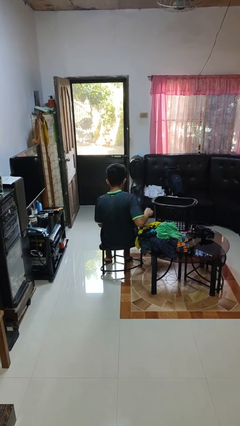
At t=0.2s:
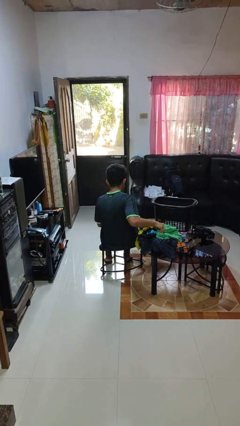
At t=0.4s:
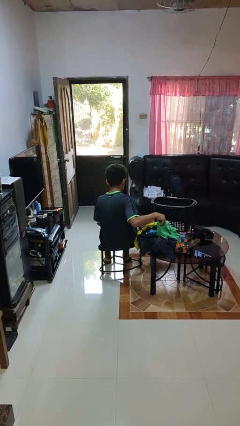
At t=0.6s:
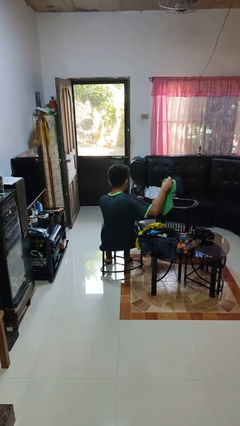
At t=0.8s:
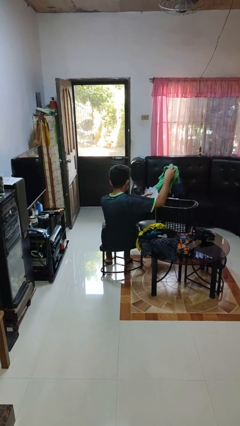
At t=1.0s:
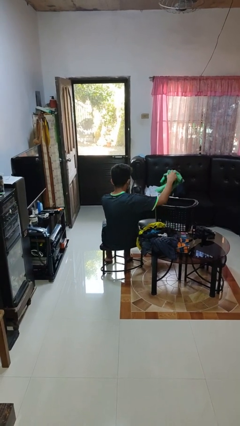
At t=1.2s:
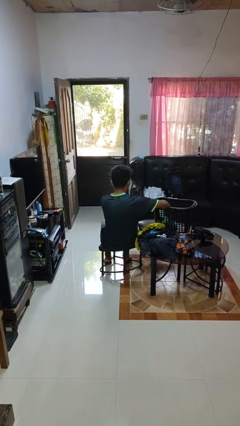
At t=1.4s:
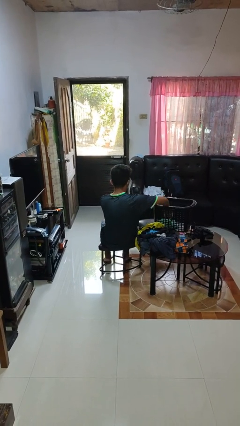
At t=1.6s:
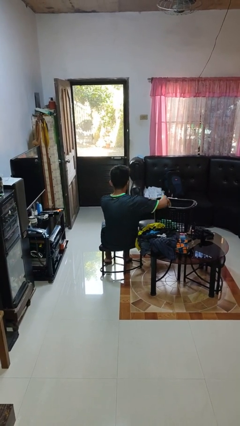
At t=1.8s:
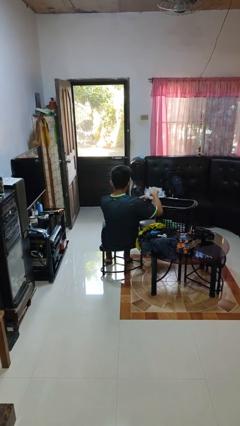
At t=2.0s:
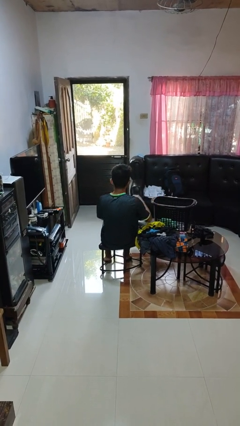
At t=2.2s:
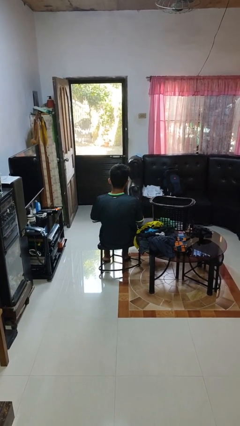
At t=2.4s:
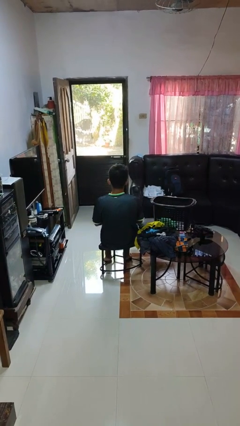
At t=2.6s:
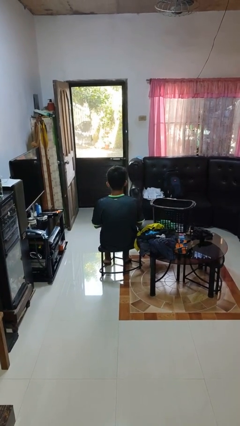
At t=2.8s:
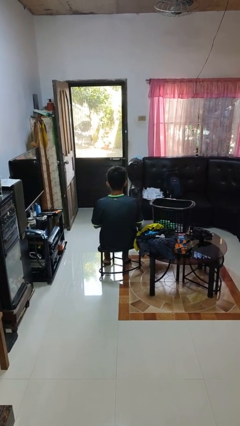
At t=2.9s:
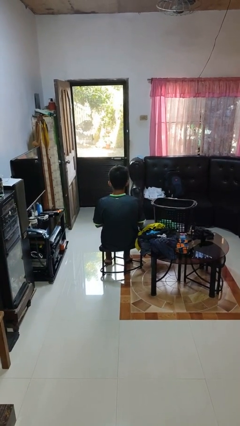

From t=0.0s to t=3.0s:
person puts object into basket

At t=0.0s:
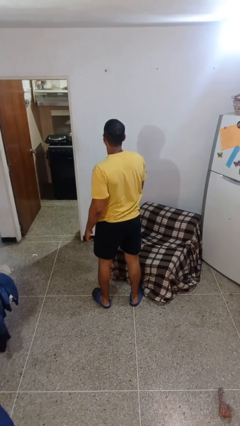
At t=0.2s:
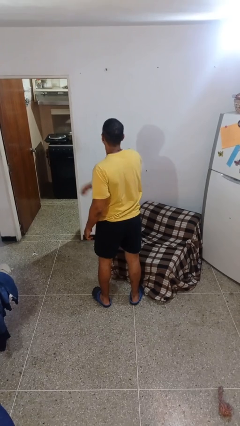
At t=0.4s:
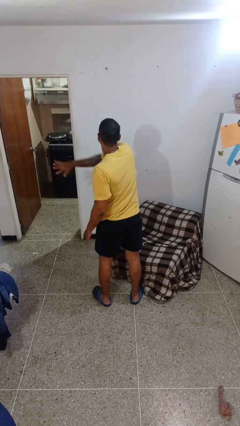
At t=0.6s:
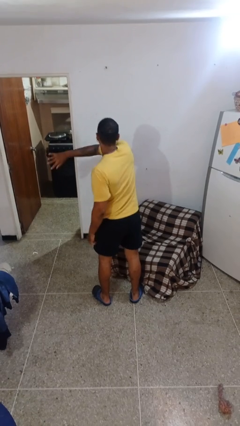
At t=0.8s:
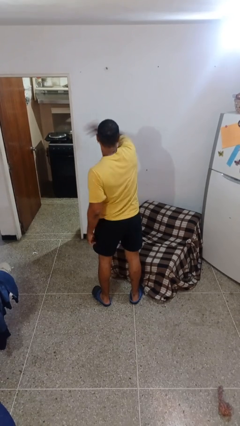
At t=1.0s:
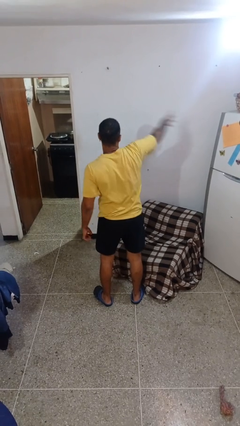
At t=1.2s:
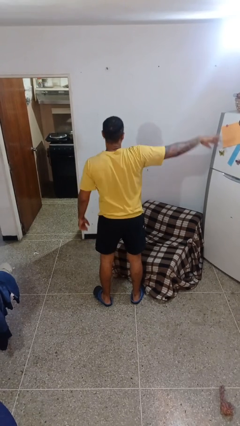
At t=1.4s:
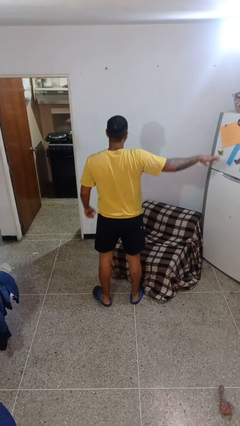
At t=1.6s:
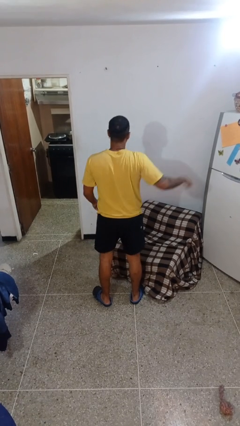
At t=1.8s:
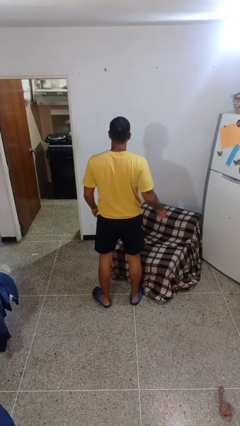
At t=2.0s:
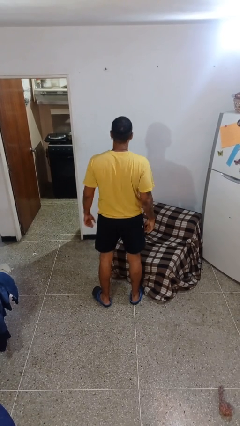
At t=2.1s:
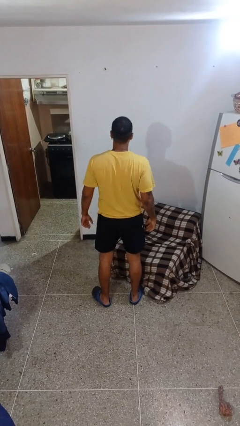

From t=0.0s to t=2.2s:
person gestures swipe right

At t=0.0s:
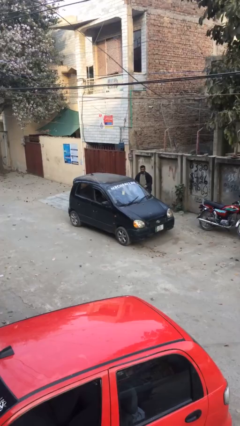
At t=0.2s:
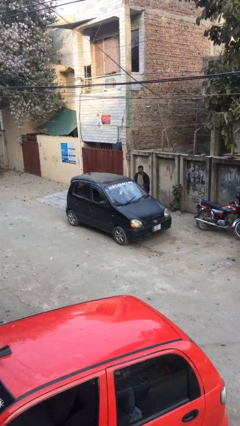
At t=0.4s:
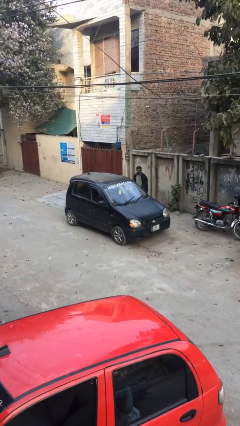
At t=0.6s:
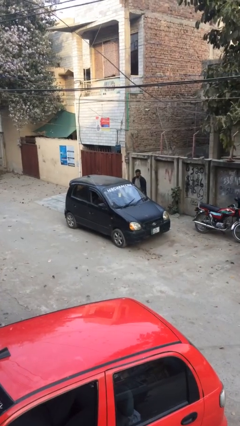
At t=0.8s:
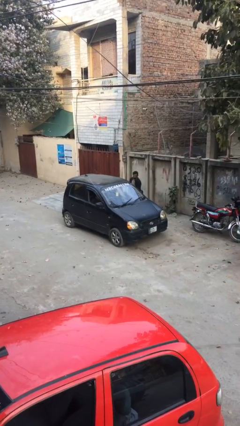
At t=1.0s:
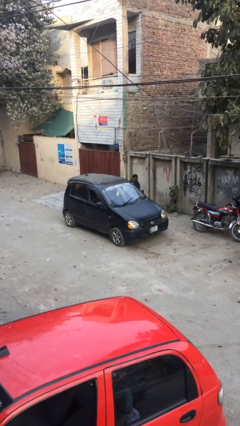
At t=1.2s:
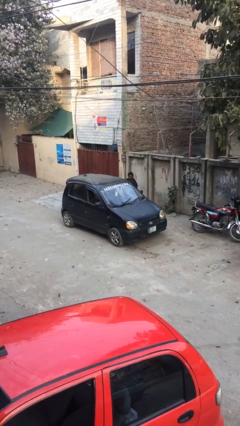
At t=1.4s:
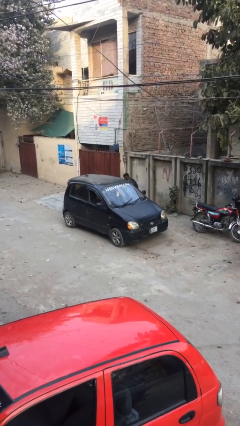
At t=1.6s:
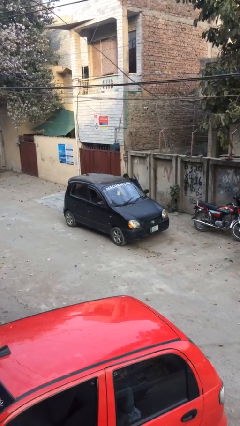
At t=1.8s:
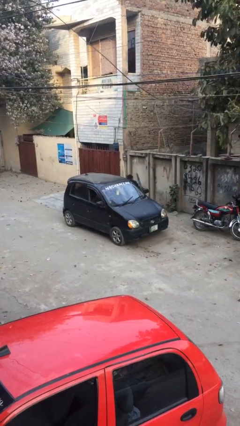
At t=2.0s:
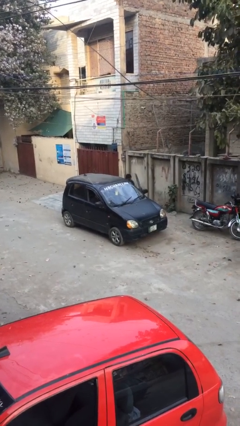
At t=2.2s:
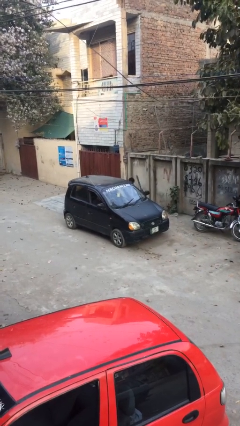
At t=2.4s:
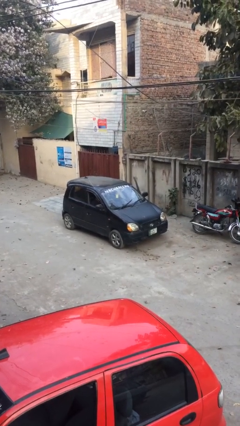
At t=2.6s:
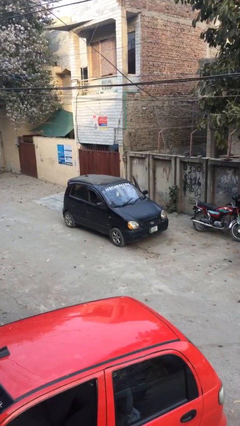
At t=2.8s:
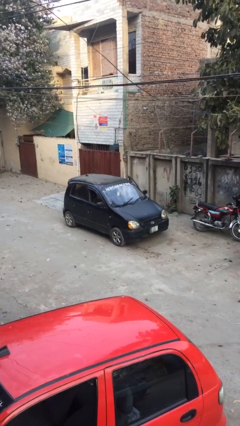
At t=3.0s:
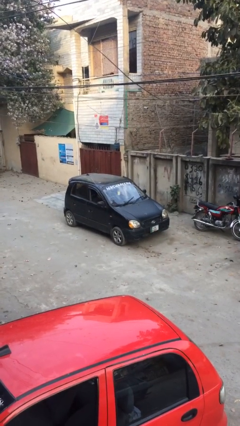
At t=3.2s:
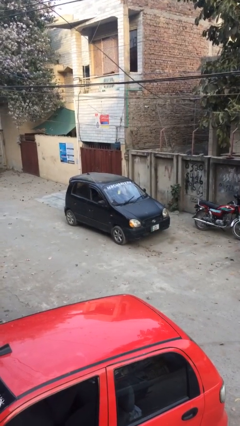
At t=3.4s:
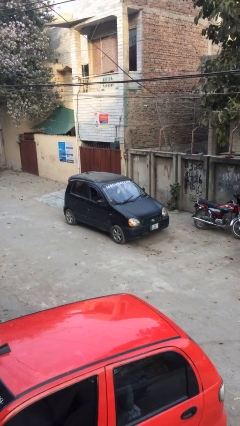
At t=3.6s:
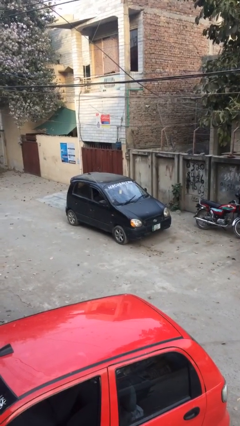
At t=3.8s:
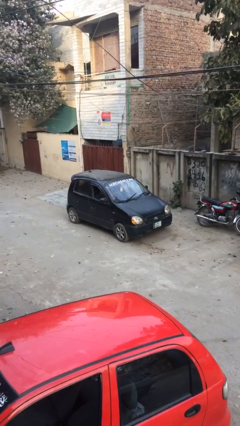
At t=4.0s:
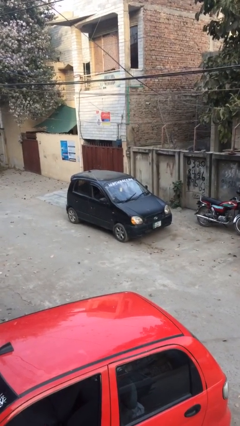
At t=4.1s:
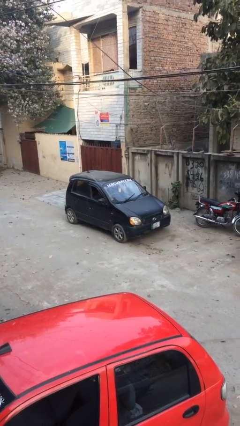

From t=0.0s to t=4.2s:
car picks up person

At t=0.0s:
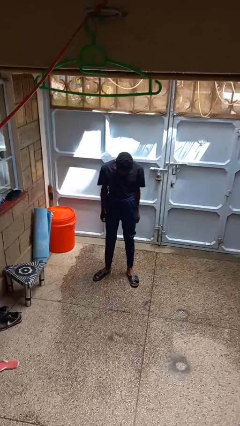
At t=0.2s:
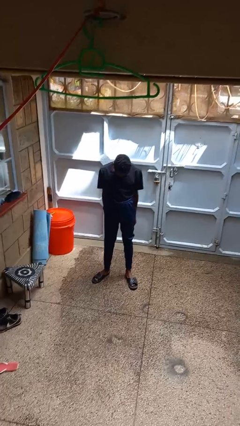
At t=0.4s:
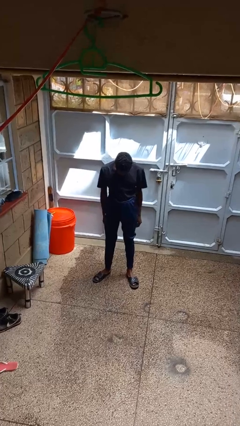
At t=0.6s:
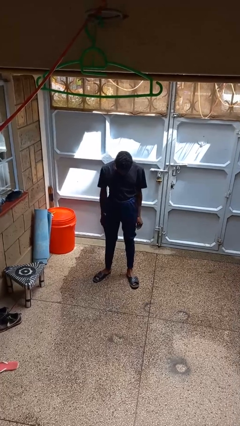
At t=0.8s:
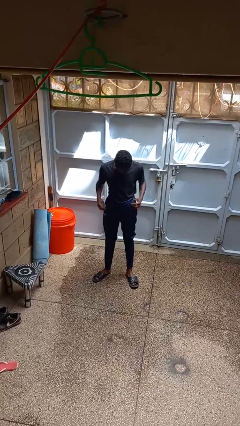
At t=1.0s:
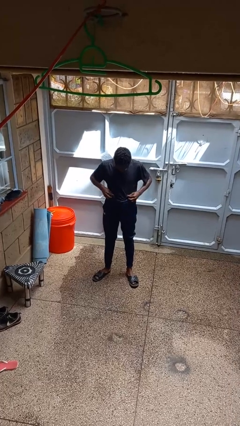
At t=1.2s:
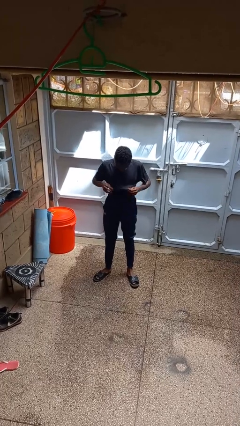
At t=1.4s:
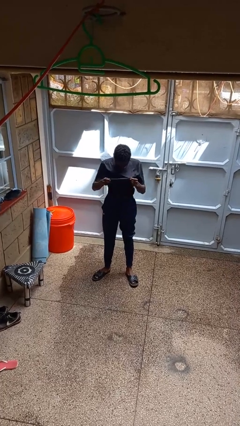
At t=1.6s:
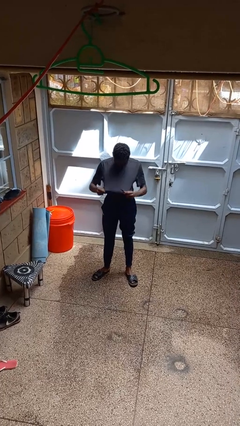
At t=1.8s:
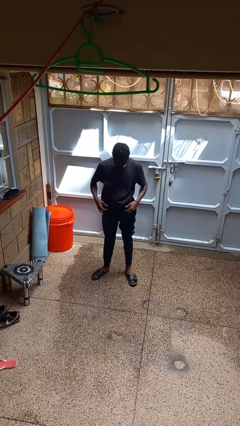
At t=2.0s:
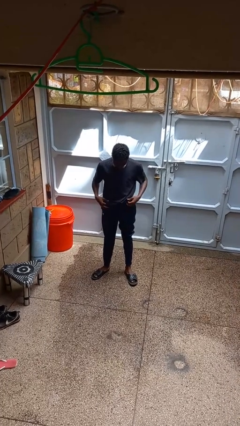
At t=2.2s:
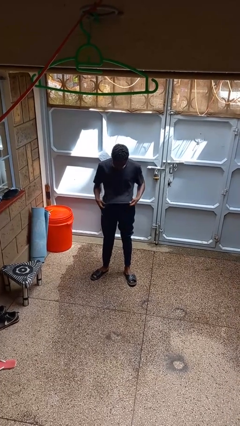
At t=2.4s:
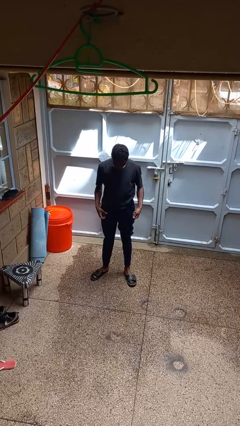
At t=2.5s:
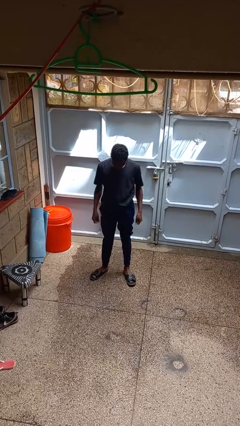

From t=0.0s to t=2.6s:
person untucks shirt

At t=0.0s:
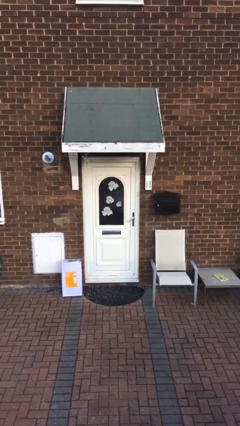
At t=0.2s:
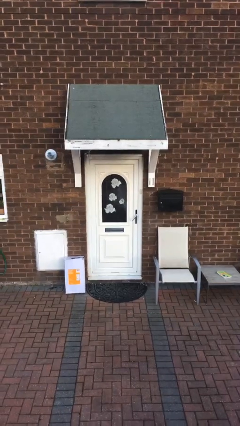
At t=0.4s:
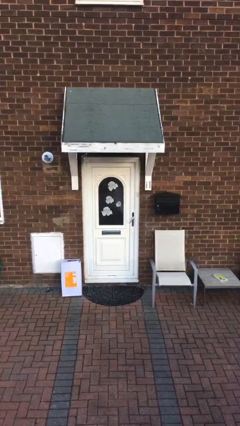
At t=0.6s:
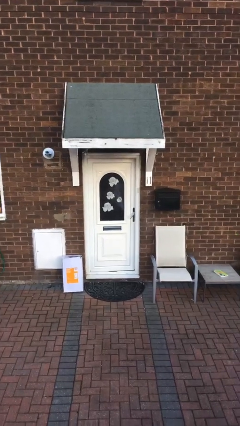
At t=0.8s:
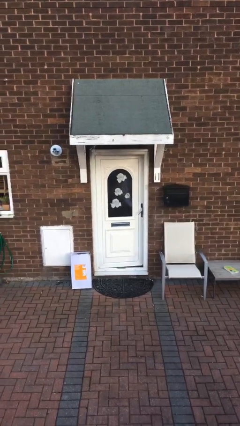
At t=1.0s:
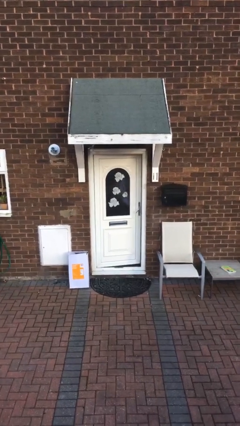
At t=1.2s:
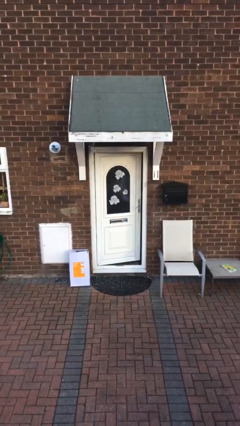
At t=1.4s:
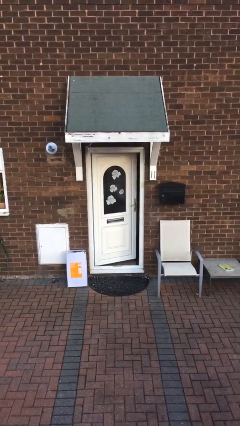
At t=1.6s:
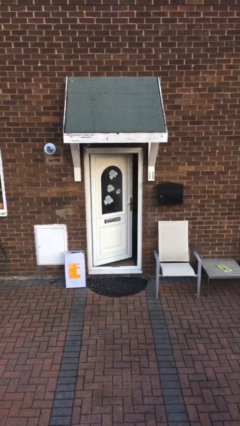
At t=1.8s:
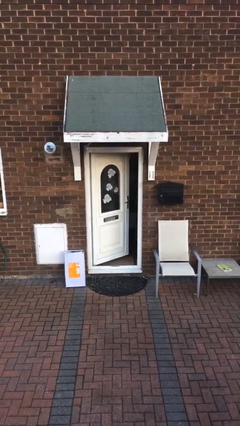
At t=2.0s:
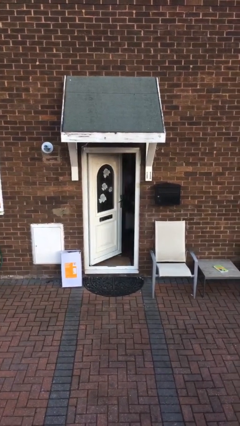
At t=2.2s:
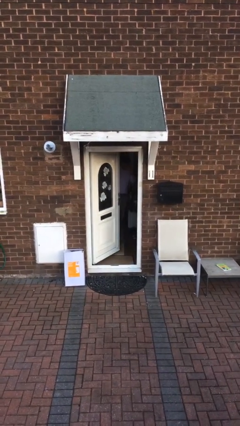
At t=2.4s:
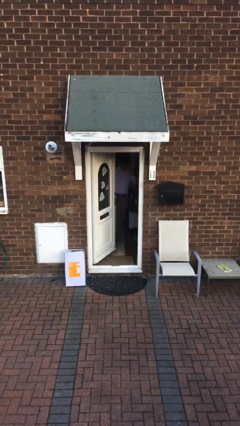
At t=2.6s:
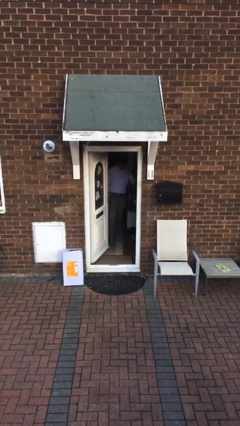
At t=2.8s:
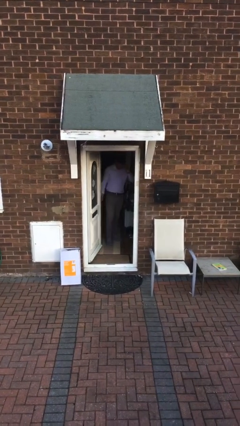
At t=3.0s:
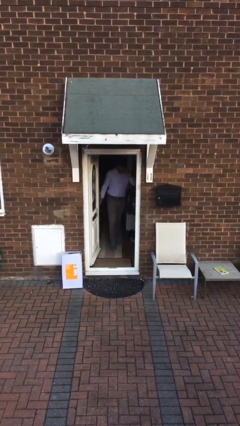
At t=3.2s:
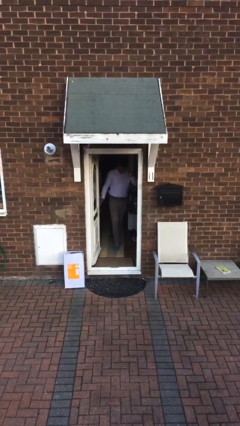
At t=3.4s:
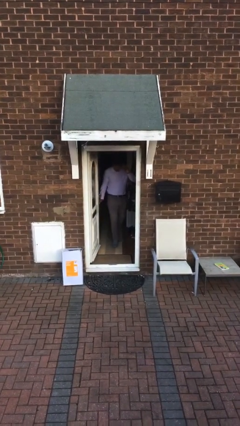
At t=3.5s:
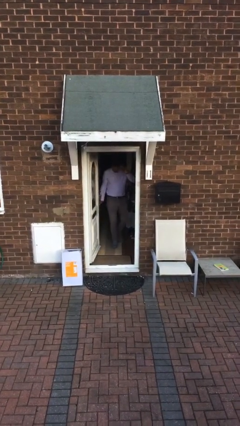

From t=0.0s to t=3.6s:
person opens facility door

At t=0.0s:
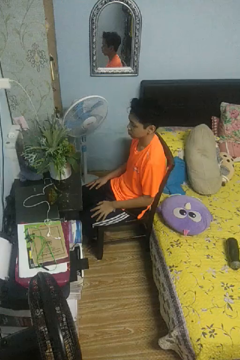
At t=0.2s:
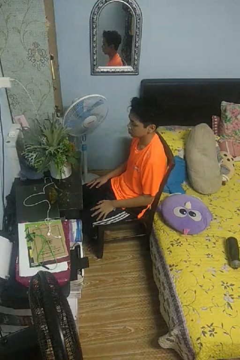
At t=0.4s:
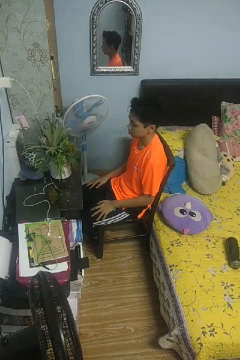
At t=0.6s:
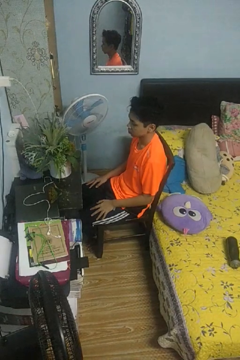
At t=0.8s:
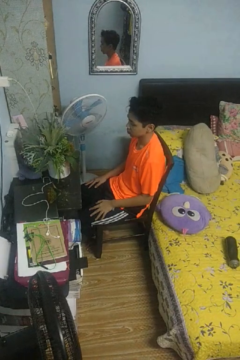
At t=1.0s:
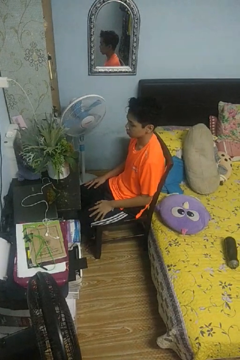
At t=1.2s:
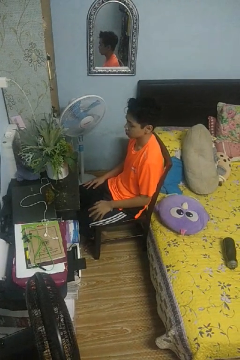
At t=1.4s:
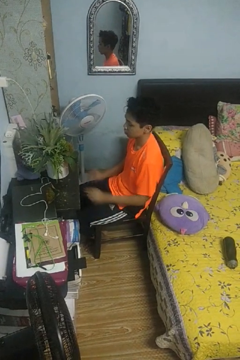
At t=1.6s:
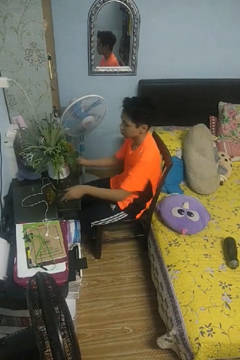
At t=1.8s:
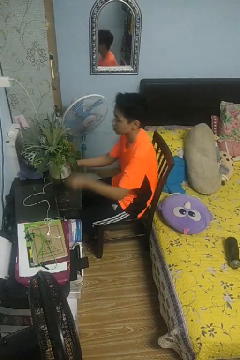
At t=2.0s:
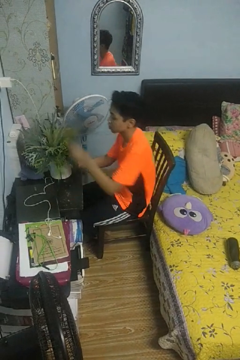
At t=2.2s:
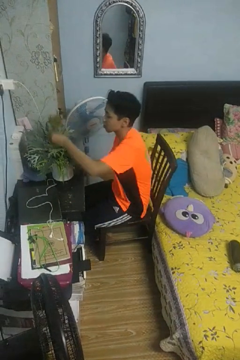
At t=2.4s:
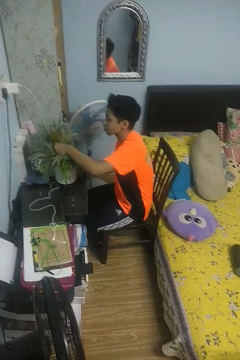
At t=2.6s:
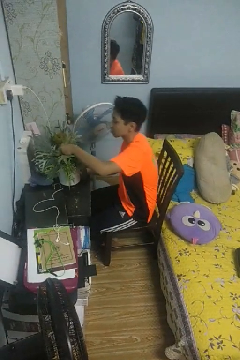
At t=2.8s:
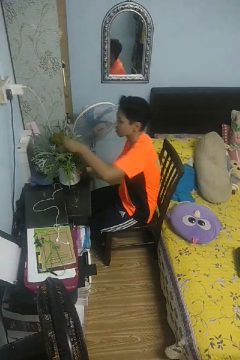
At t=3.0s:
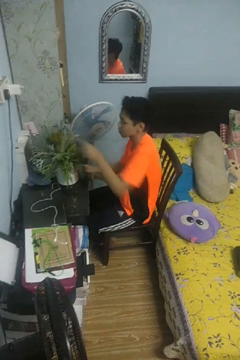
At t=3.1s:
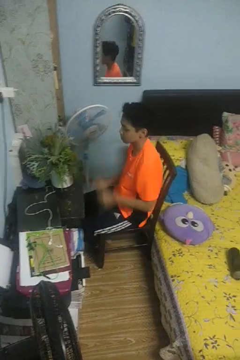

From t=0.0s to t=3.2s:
person arranges flowers in vase
